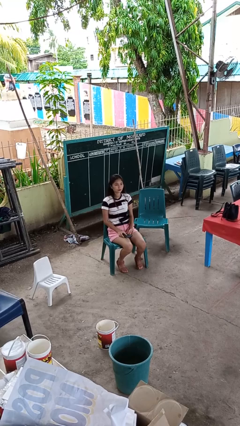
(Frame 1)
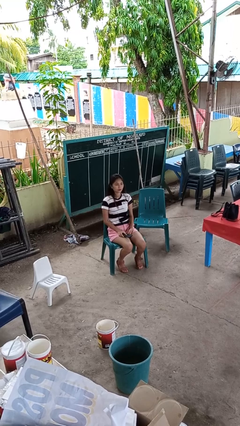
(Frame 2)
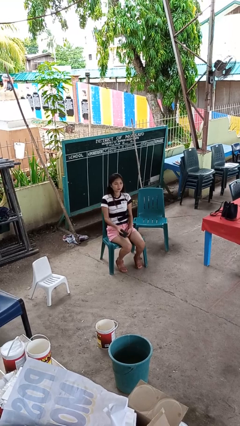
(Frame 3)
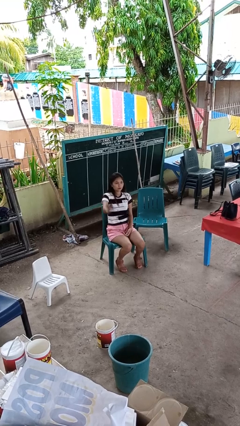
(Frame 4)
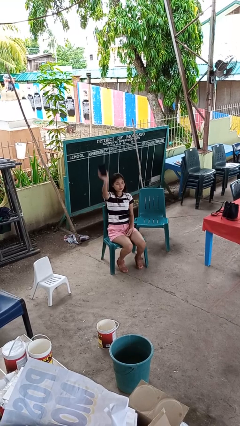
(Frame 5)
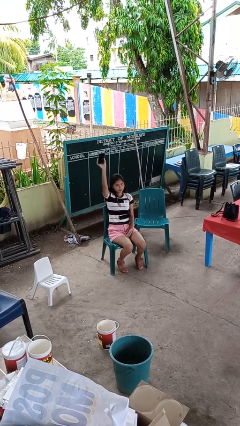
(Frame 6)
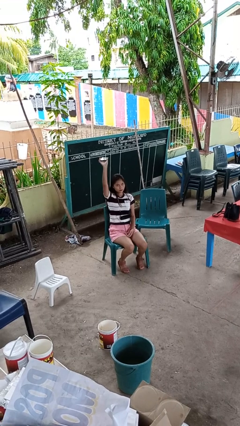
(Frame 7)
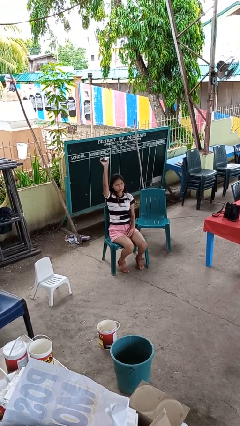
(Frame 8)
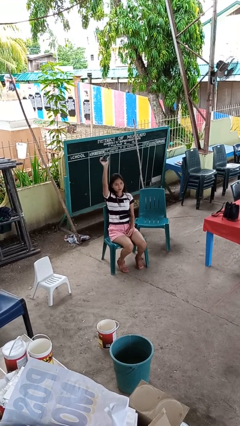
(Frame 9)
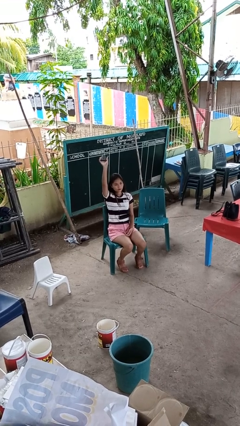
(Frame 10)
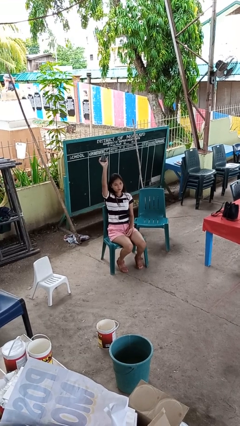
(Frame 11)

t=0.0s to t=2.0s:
person holds object above head

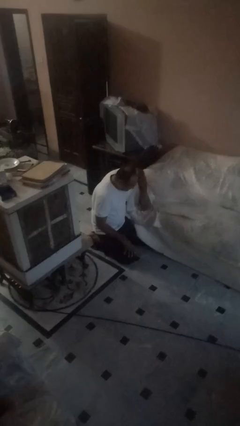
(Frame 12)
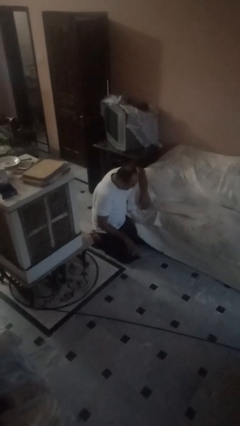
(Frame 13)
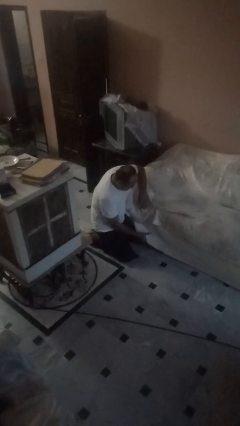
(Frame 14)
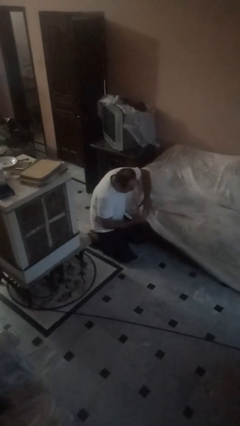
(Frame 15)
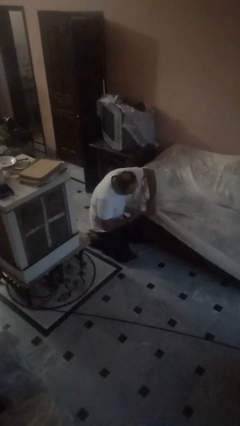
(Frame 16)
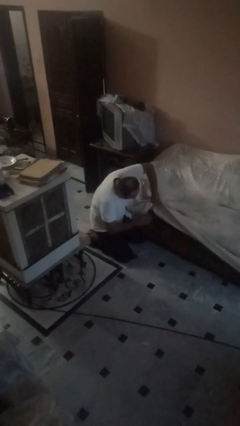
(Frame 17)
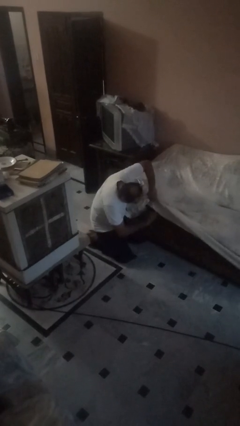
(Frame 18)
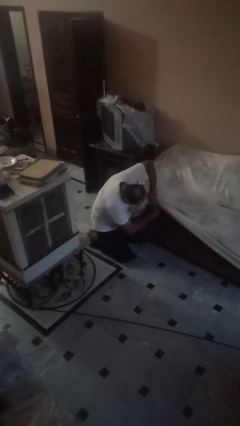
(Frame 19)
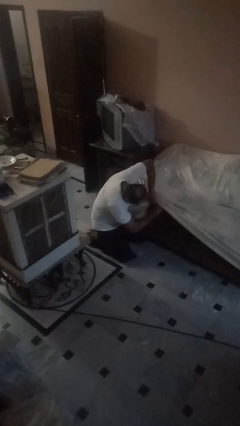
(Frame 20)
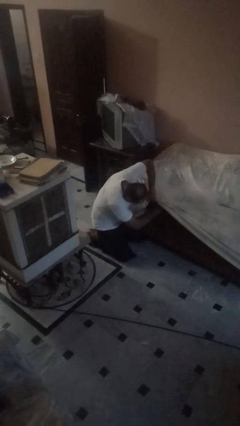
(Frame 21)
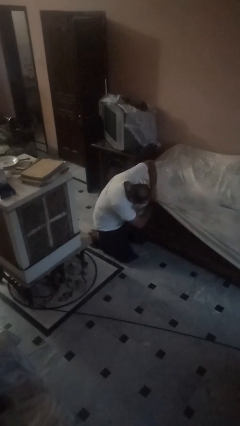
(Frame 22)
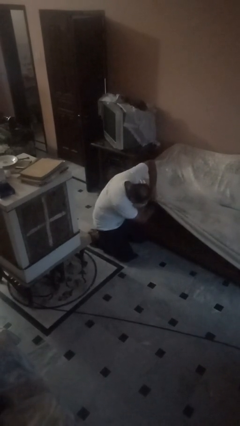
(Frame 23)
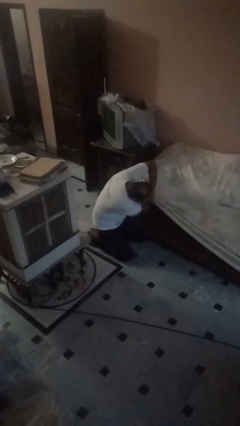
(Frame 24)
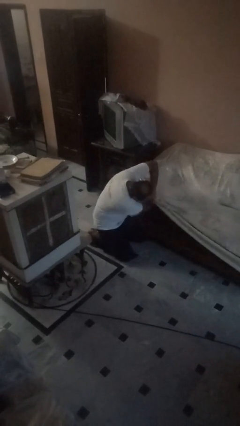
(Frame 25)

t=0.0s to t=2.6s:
person searches in couch

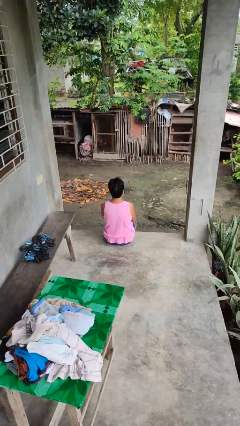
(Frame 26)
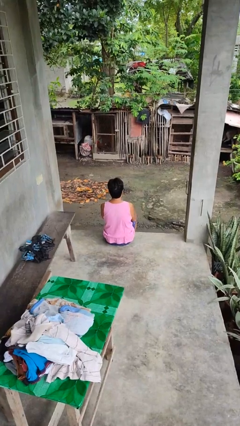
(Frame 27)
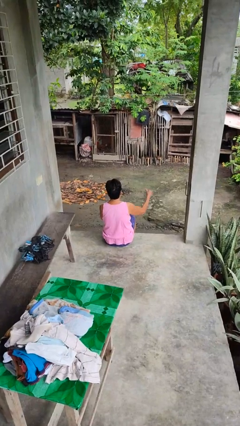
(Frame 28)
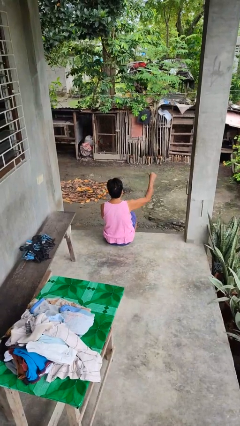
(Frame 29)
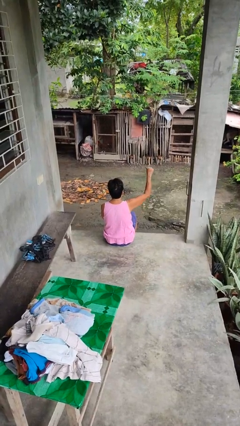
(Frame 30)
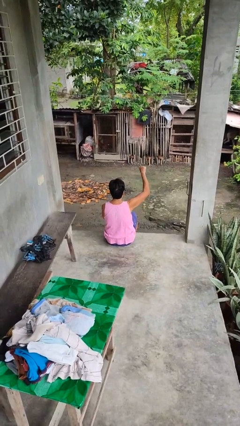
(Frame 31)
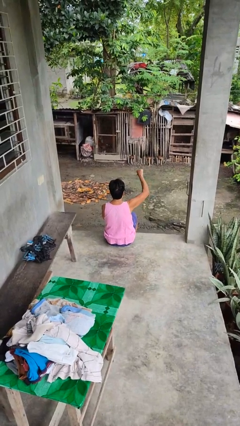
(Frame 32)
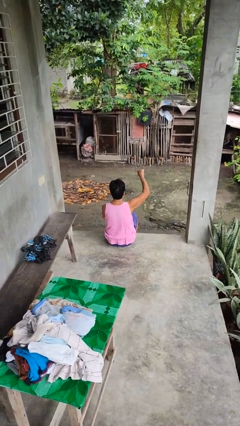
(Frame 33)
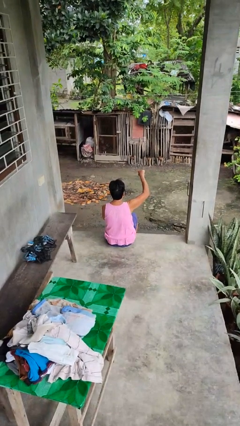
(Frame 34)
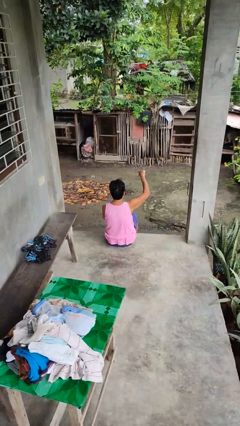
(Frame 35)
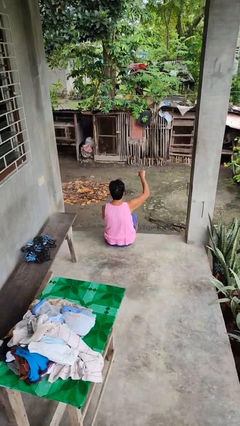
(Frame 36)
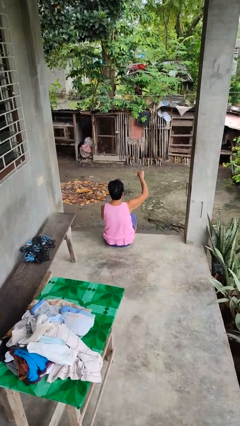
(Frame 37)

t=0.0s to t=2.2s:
person gestures thumbs down

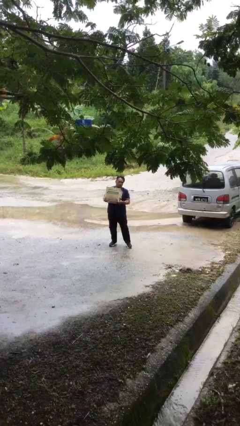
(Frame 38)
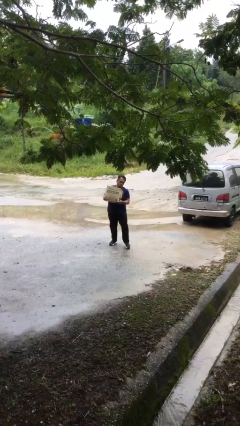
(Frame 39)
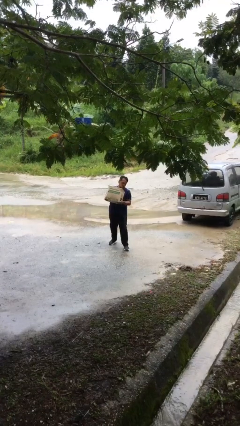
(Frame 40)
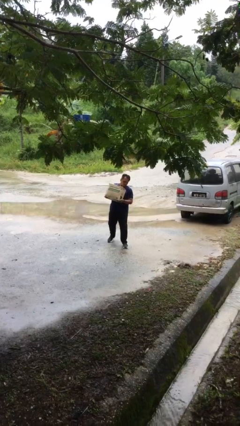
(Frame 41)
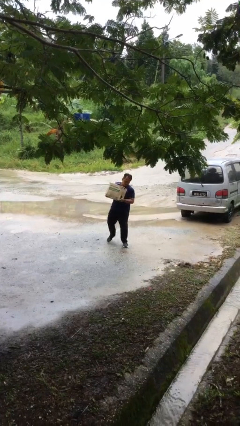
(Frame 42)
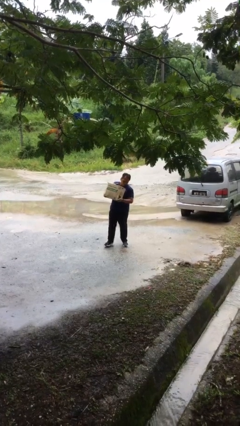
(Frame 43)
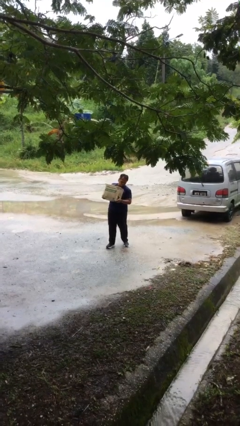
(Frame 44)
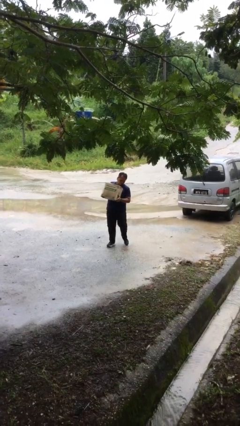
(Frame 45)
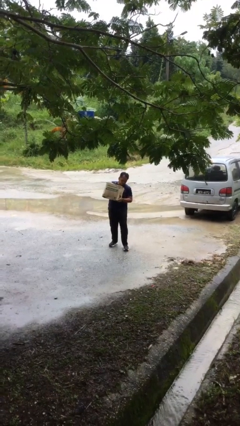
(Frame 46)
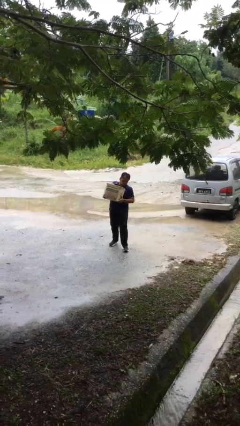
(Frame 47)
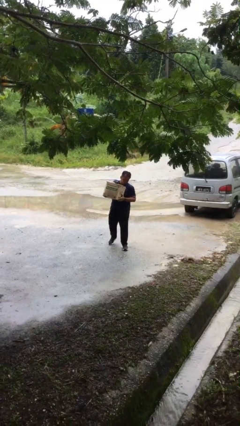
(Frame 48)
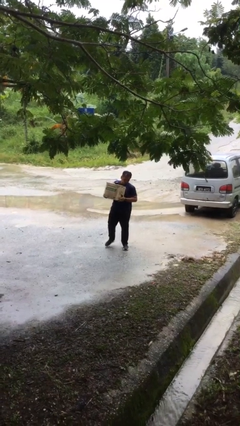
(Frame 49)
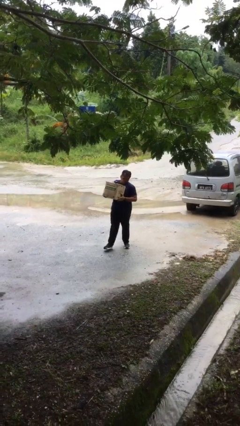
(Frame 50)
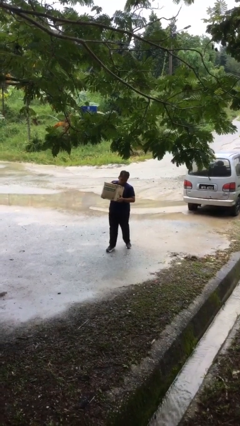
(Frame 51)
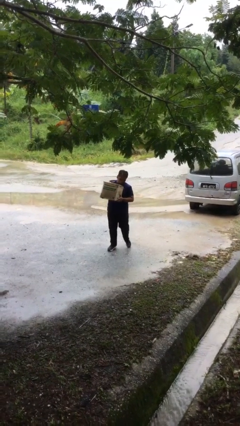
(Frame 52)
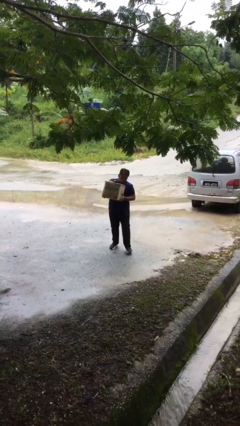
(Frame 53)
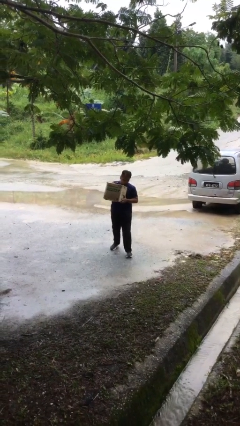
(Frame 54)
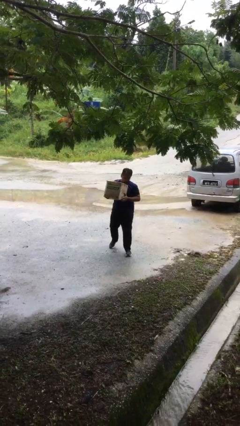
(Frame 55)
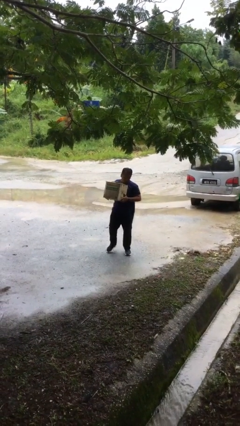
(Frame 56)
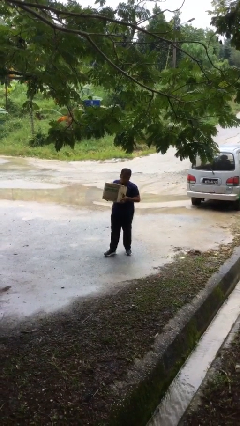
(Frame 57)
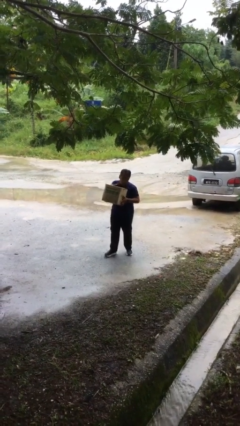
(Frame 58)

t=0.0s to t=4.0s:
person carries heavy object

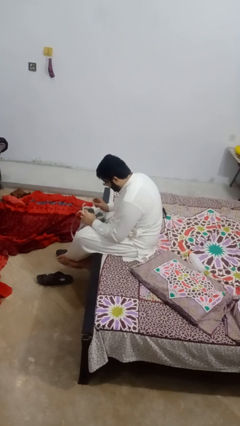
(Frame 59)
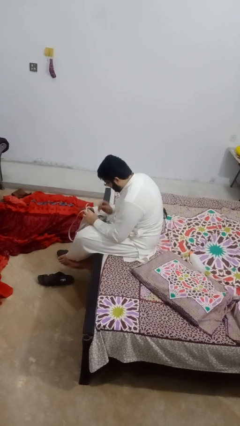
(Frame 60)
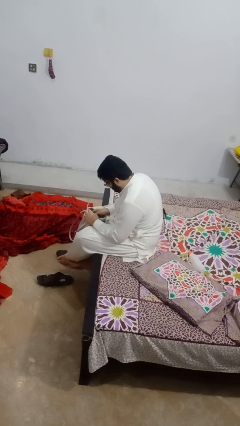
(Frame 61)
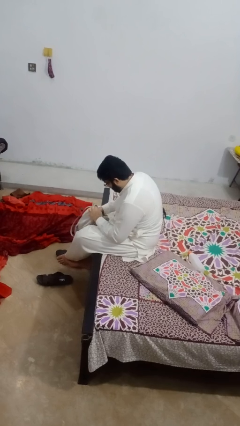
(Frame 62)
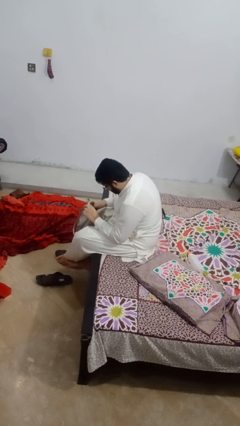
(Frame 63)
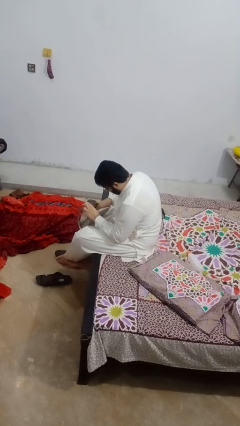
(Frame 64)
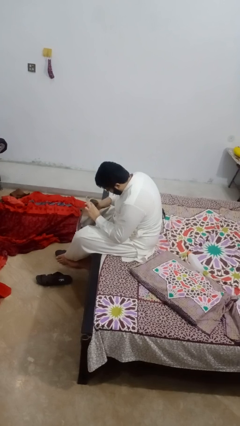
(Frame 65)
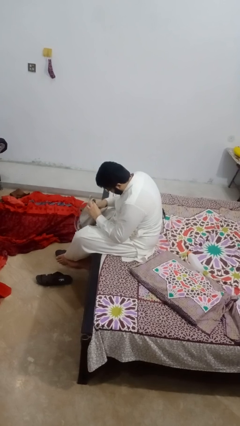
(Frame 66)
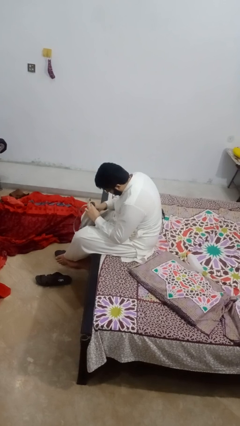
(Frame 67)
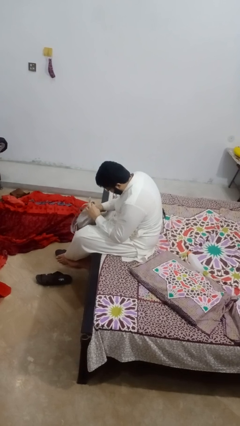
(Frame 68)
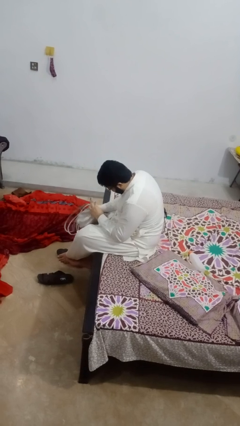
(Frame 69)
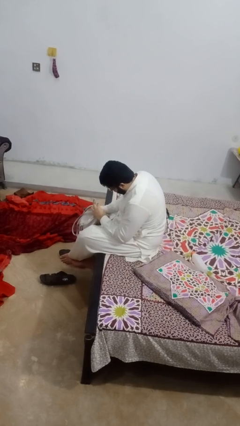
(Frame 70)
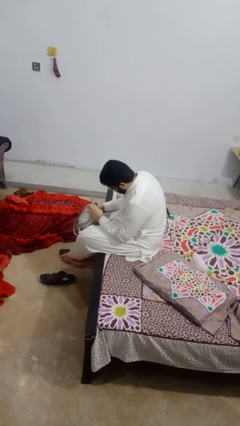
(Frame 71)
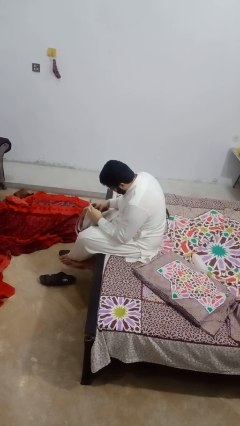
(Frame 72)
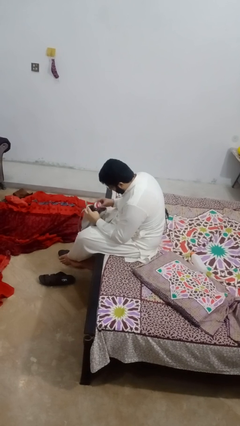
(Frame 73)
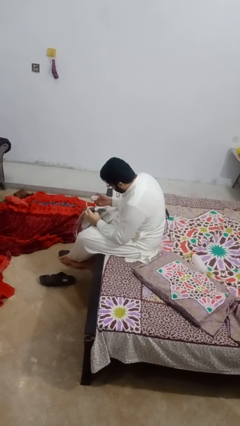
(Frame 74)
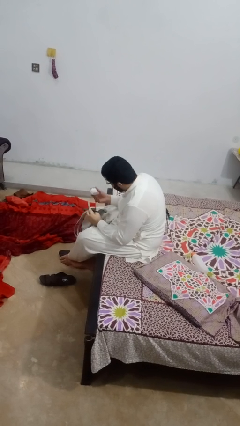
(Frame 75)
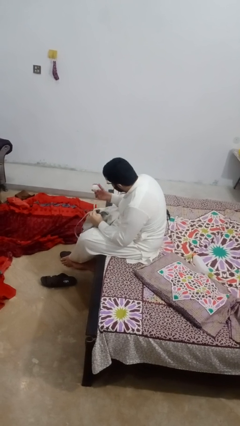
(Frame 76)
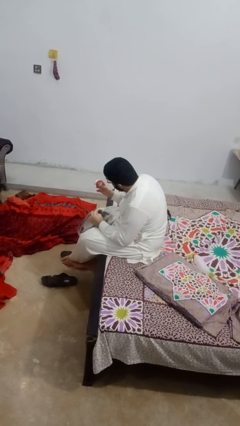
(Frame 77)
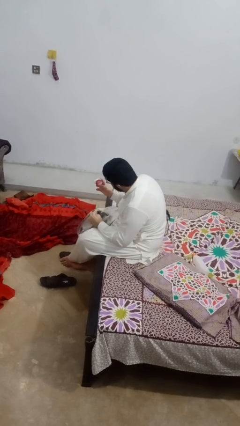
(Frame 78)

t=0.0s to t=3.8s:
person searches in purse

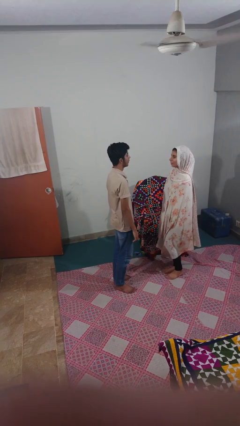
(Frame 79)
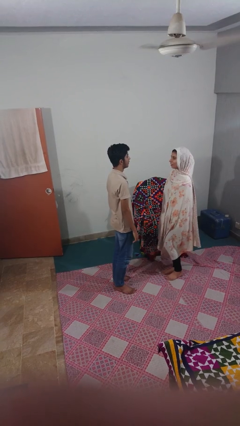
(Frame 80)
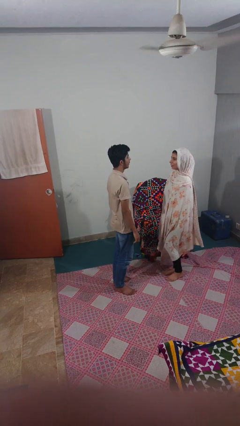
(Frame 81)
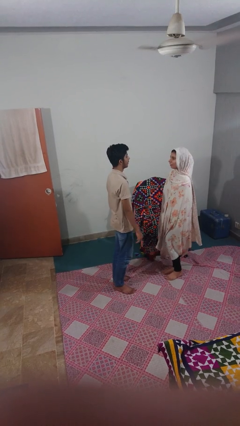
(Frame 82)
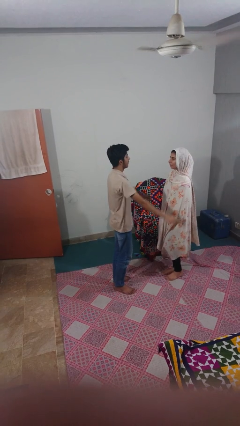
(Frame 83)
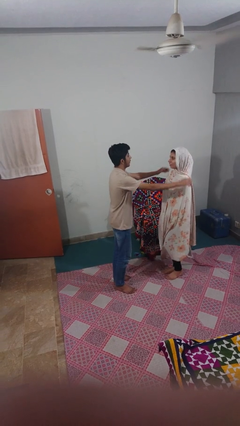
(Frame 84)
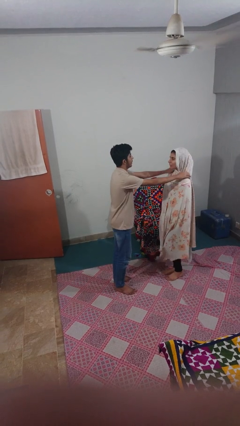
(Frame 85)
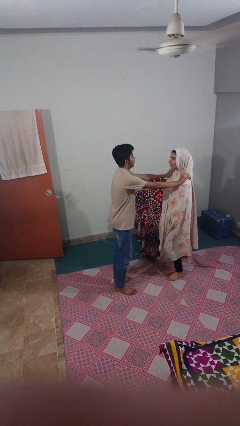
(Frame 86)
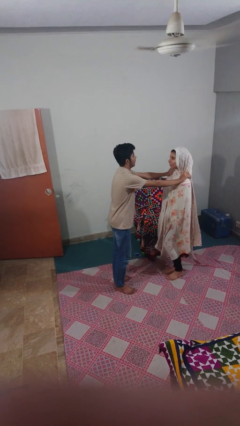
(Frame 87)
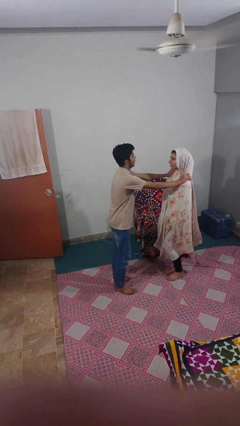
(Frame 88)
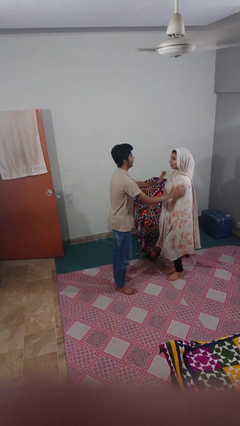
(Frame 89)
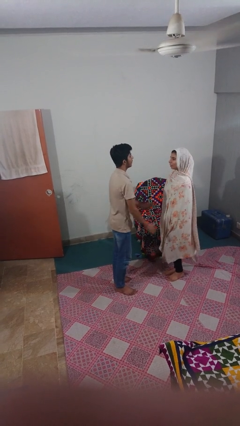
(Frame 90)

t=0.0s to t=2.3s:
person pounds shoulders of person

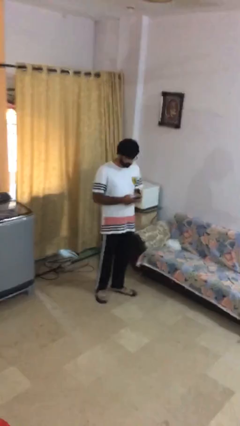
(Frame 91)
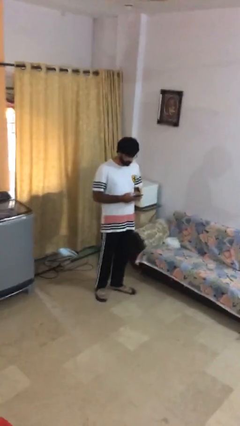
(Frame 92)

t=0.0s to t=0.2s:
person texts on phone
